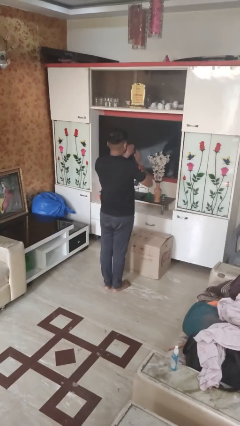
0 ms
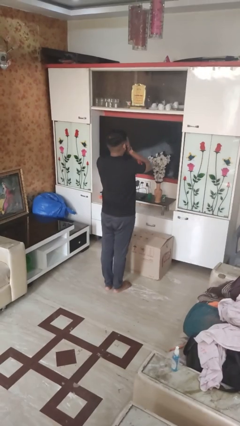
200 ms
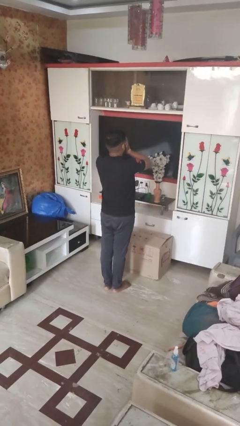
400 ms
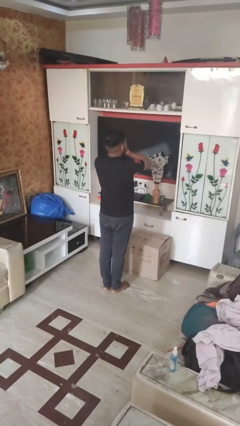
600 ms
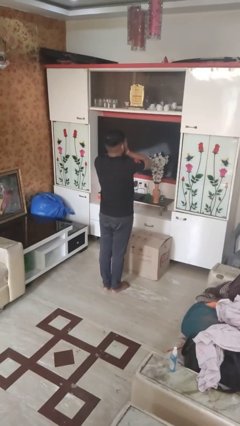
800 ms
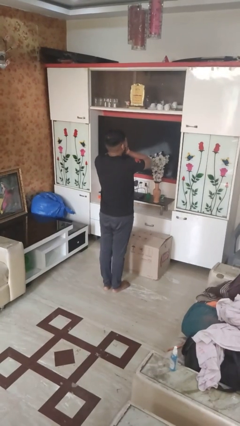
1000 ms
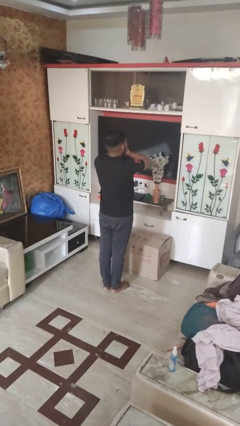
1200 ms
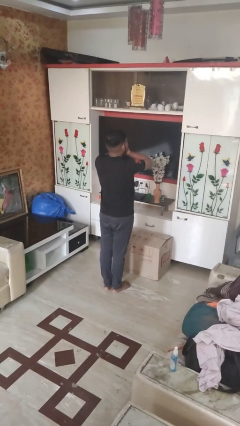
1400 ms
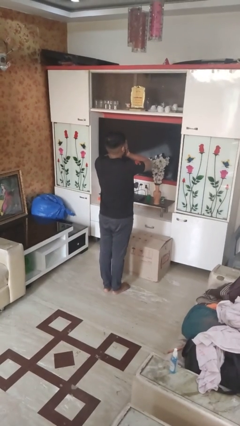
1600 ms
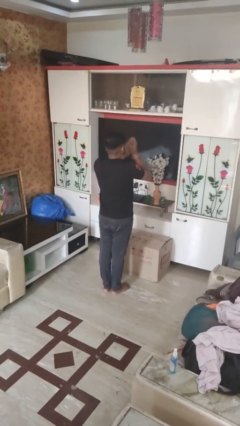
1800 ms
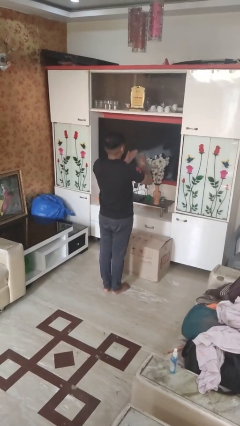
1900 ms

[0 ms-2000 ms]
person covers face with hands

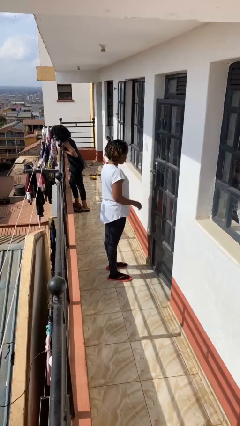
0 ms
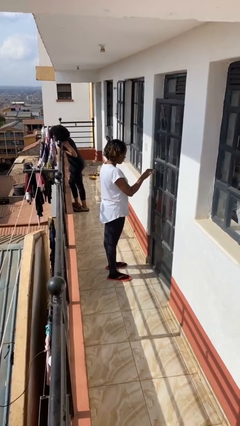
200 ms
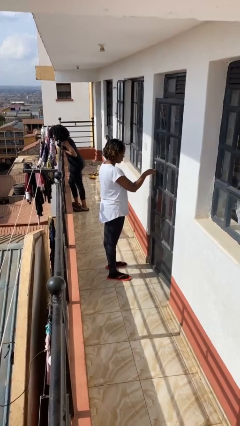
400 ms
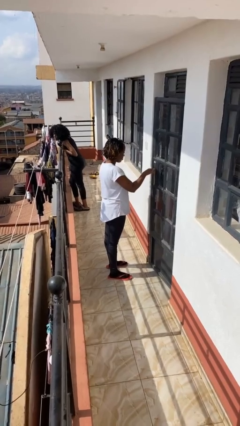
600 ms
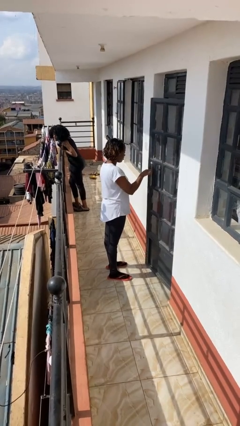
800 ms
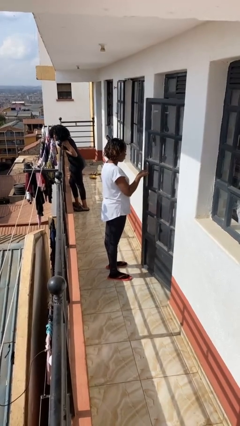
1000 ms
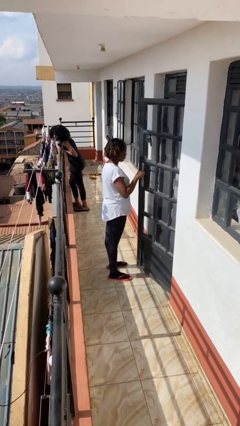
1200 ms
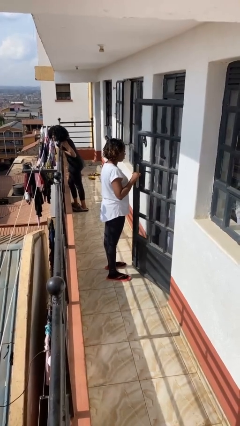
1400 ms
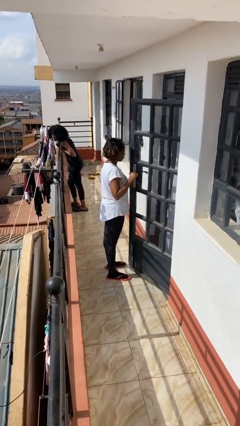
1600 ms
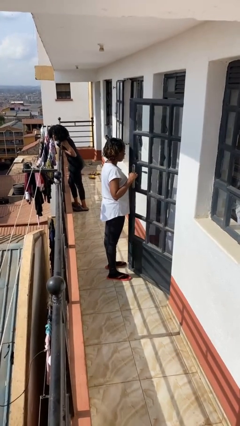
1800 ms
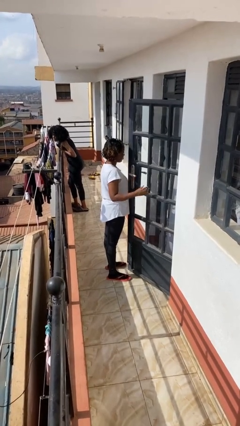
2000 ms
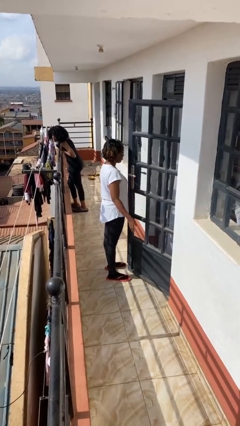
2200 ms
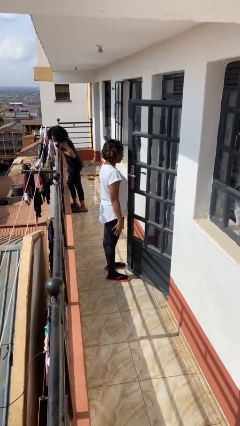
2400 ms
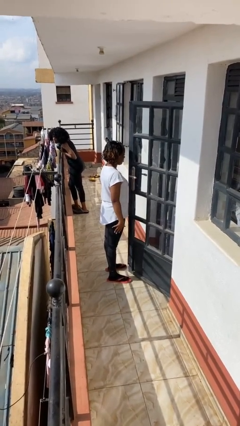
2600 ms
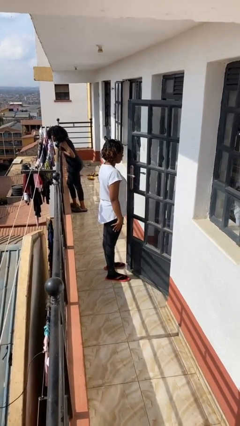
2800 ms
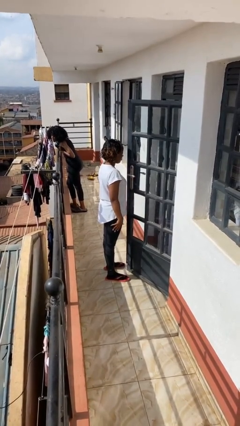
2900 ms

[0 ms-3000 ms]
person opens facility door

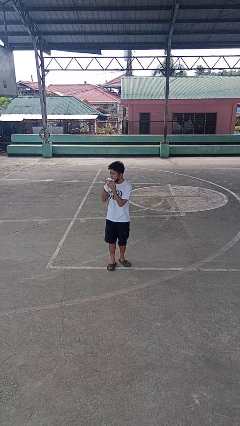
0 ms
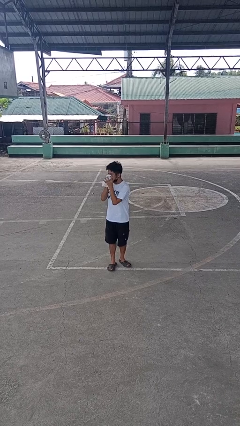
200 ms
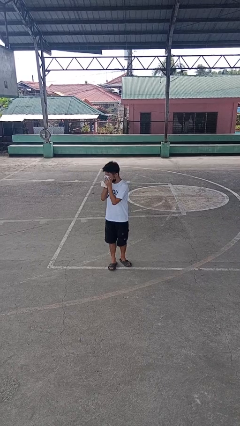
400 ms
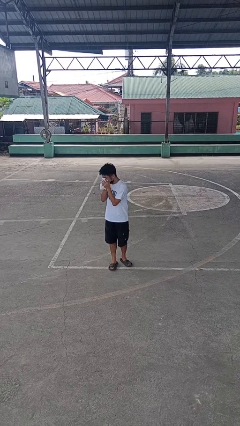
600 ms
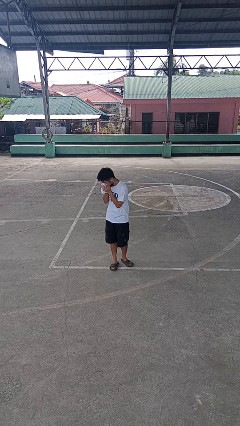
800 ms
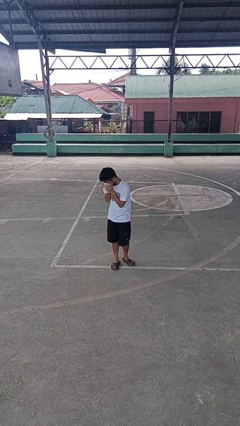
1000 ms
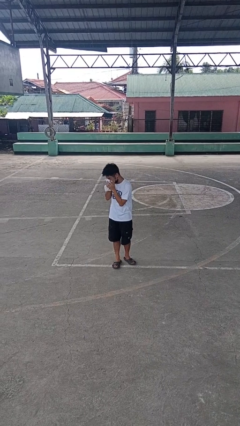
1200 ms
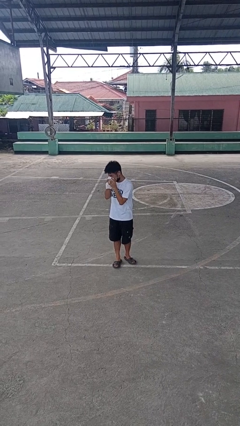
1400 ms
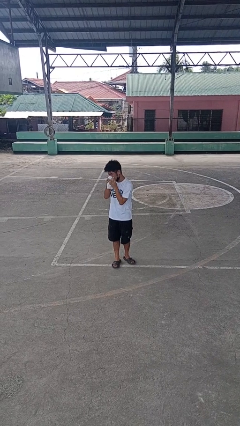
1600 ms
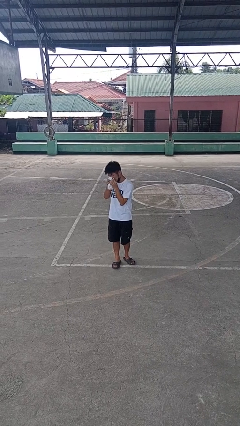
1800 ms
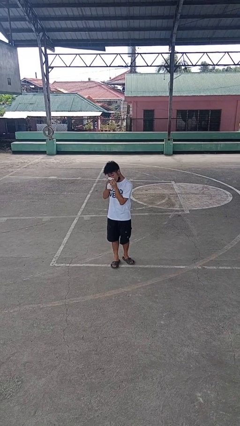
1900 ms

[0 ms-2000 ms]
person blows nose

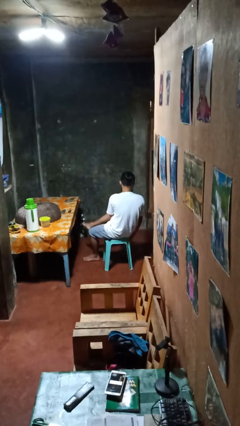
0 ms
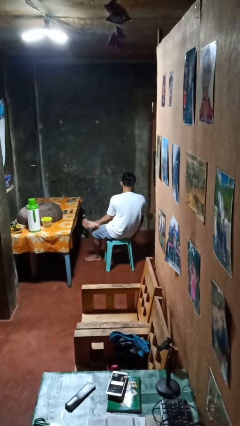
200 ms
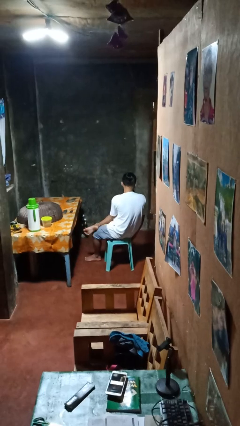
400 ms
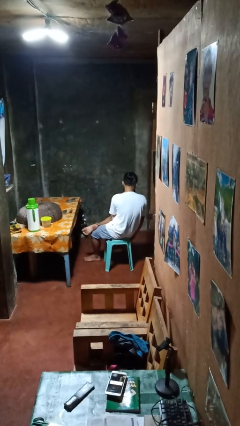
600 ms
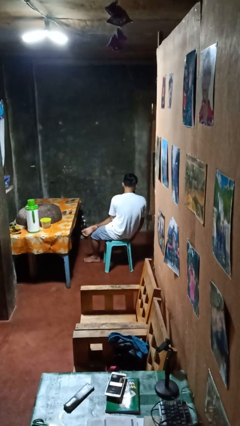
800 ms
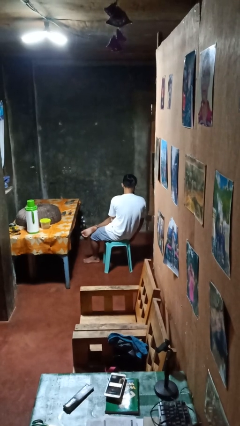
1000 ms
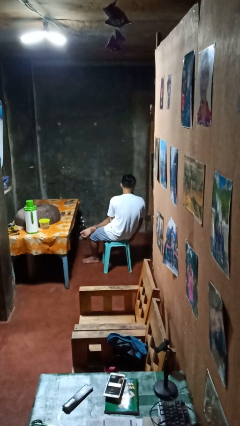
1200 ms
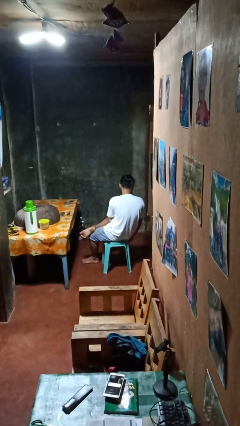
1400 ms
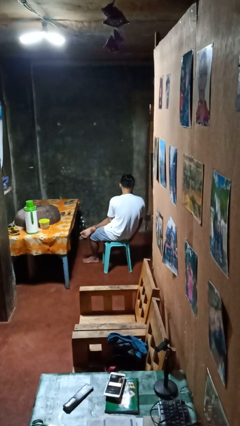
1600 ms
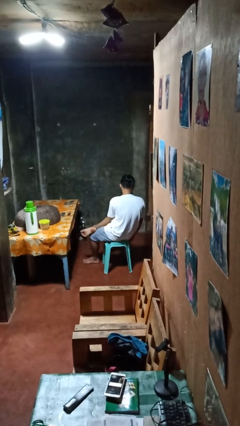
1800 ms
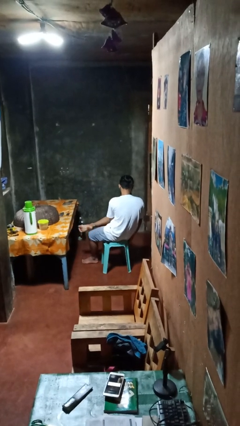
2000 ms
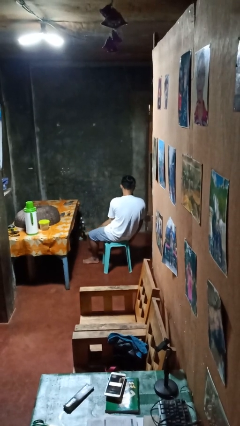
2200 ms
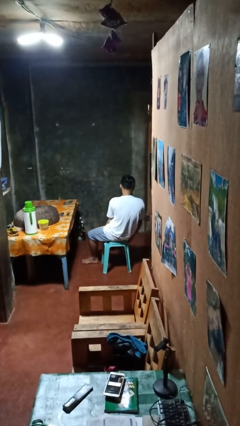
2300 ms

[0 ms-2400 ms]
person crosses legs

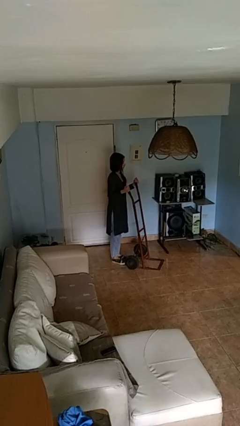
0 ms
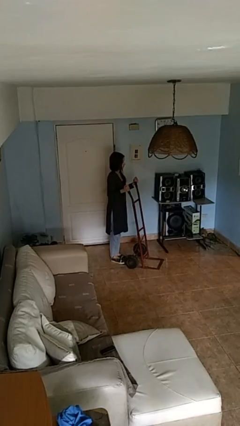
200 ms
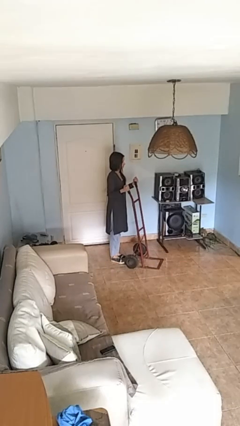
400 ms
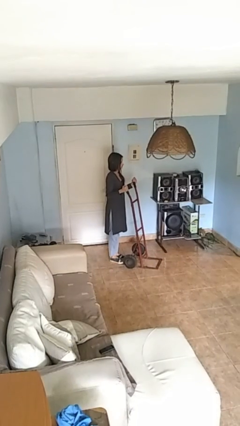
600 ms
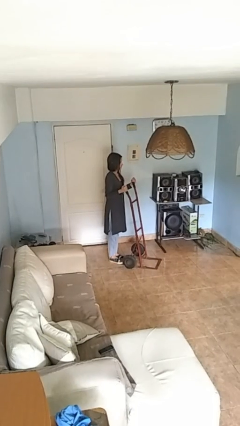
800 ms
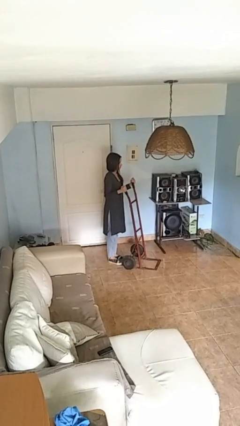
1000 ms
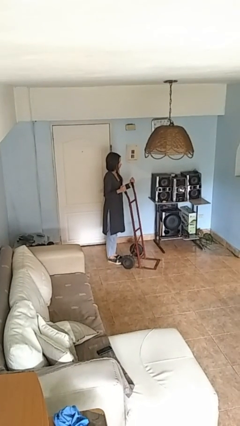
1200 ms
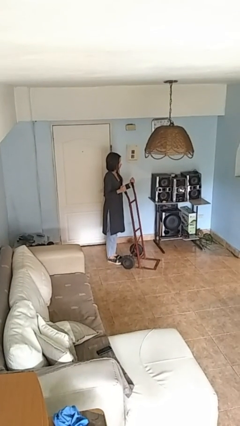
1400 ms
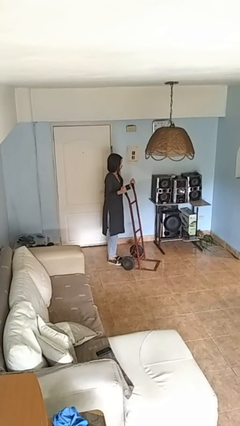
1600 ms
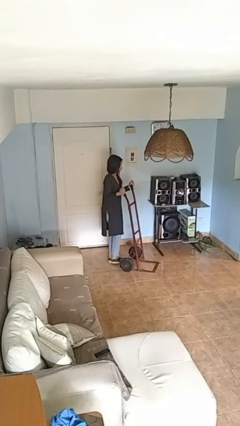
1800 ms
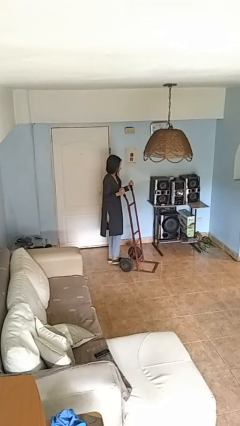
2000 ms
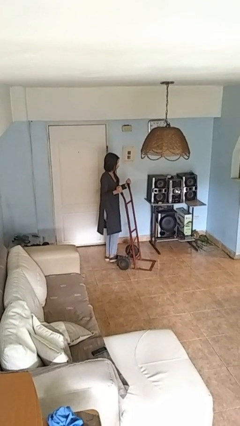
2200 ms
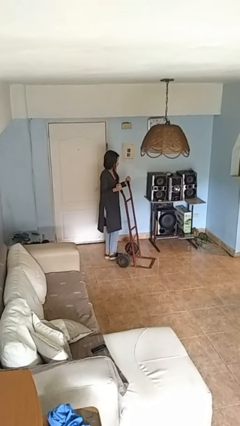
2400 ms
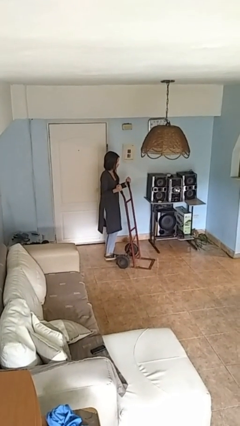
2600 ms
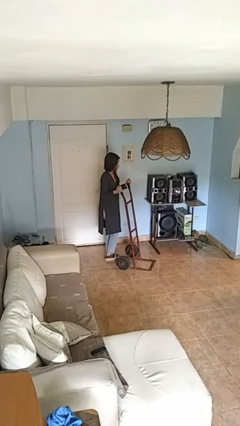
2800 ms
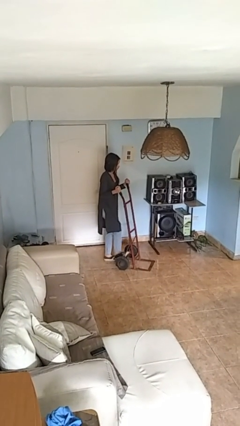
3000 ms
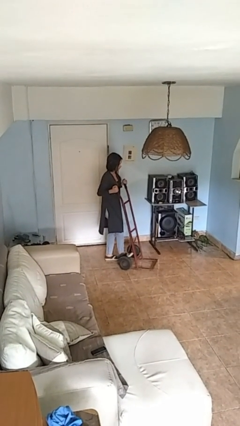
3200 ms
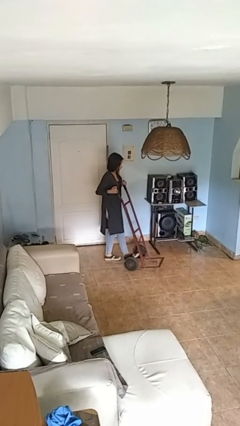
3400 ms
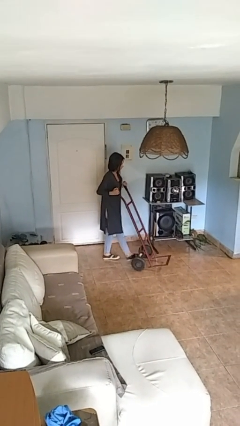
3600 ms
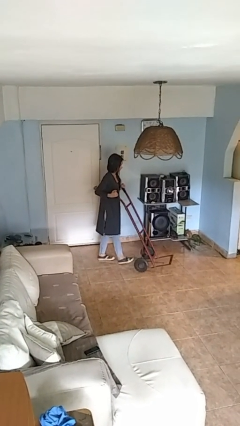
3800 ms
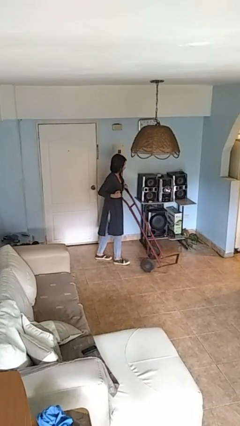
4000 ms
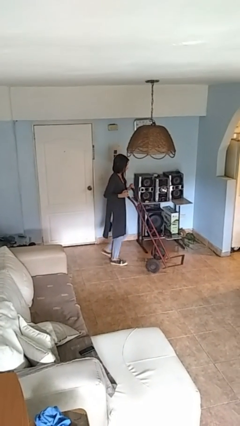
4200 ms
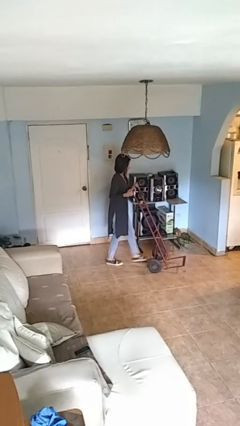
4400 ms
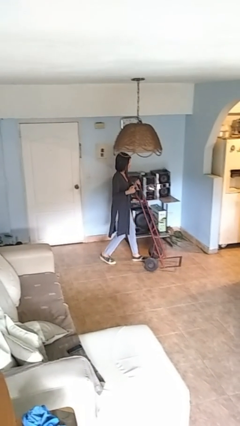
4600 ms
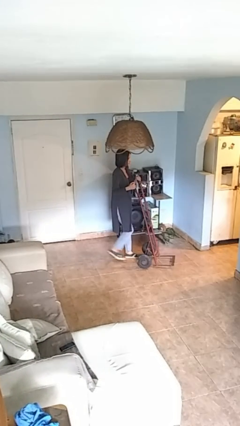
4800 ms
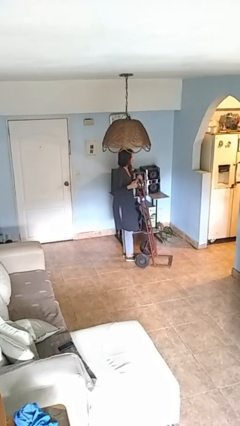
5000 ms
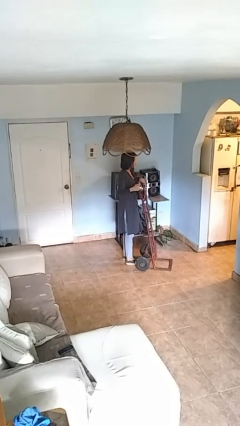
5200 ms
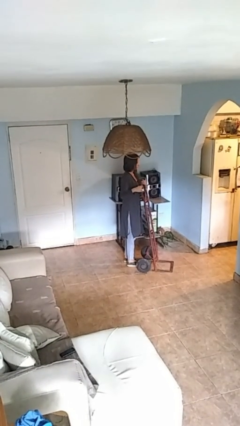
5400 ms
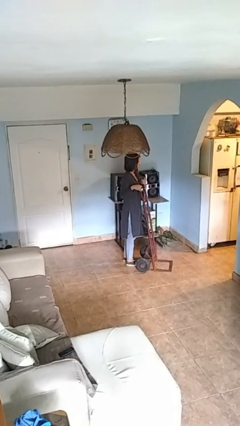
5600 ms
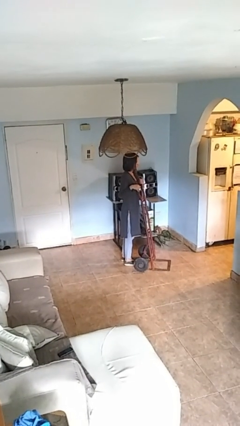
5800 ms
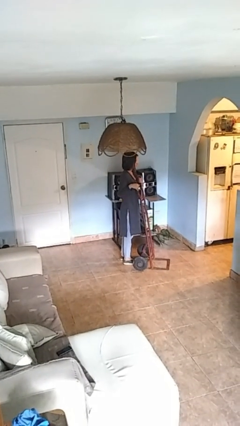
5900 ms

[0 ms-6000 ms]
person pushes wheeled cart

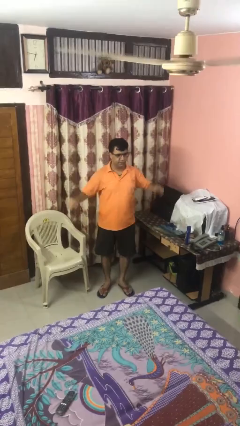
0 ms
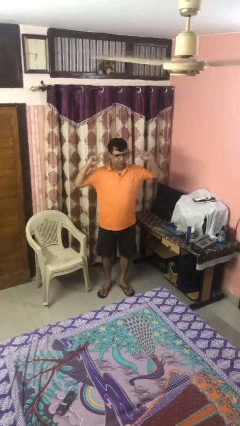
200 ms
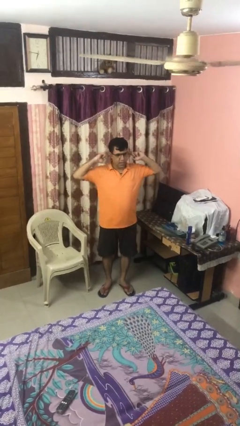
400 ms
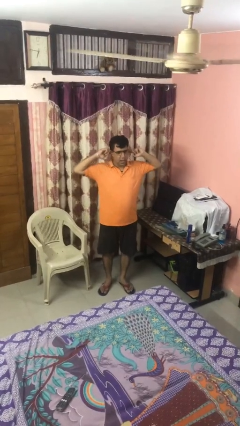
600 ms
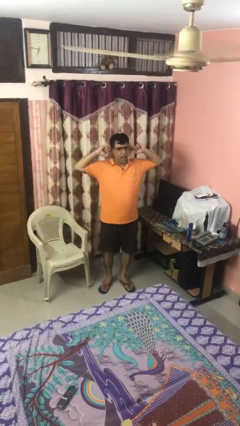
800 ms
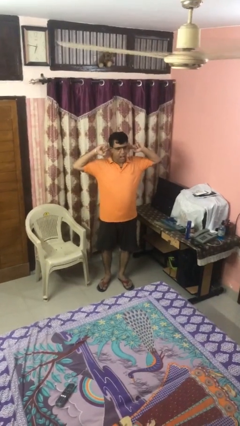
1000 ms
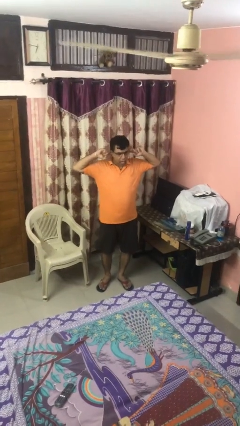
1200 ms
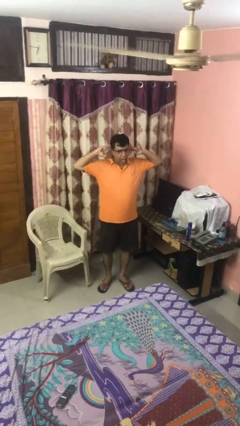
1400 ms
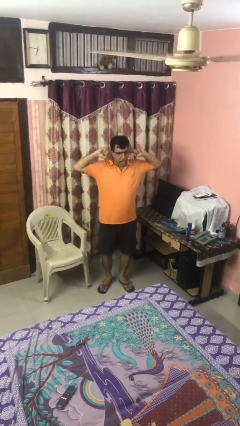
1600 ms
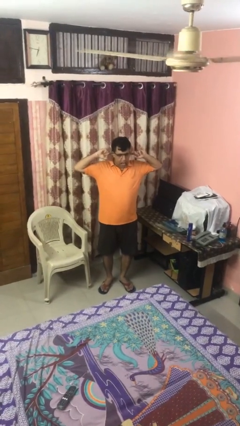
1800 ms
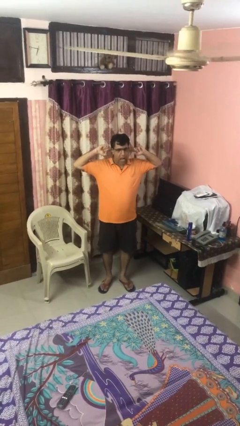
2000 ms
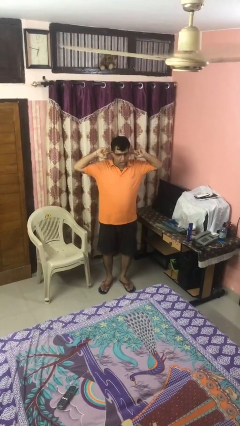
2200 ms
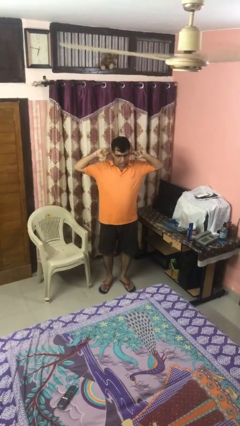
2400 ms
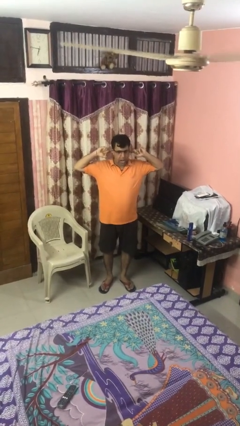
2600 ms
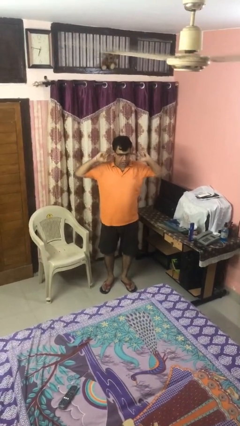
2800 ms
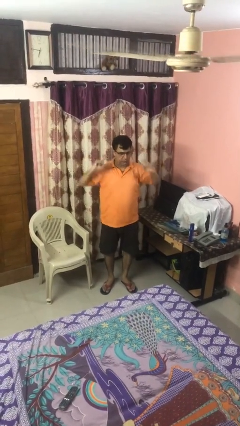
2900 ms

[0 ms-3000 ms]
person puts fingers in ear
